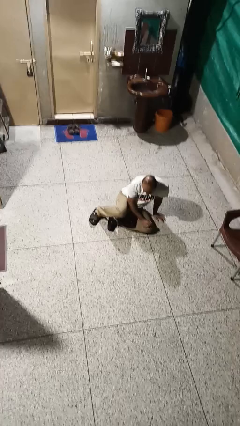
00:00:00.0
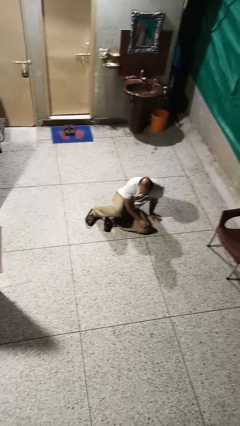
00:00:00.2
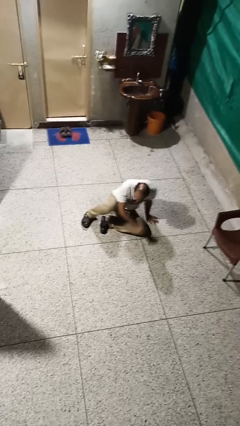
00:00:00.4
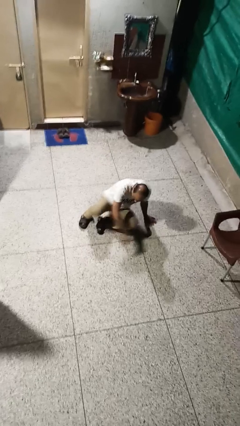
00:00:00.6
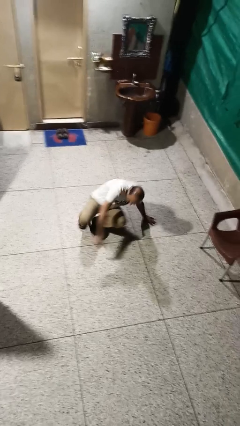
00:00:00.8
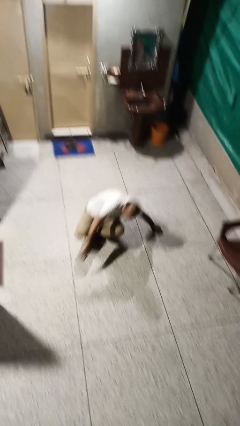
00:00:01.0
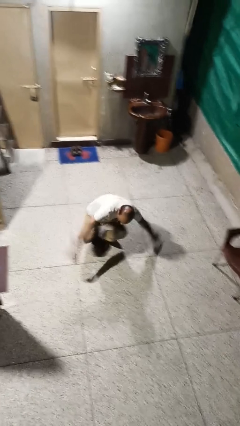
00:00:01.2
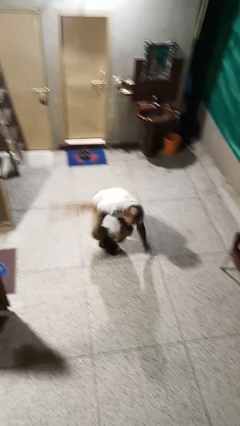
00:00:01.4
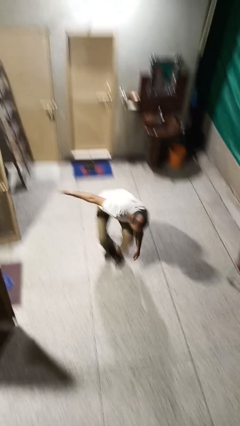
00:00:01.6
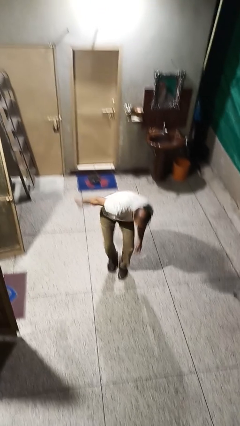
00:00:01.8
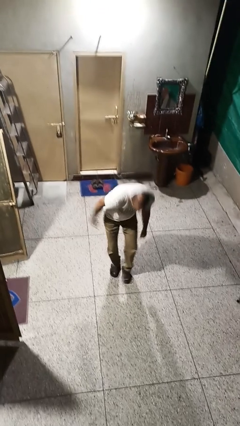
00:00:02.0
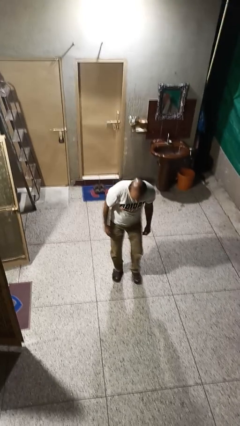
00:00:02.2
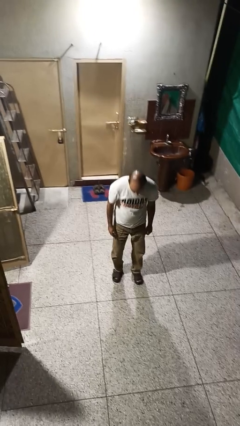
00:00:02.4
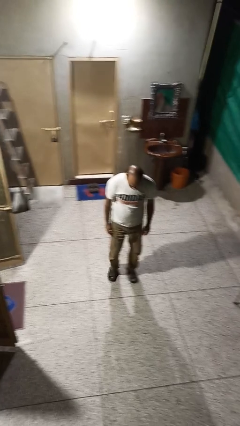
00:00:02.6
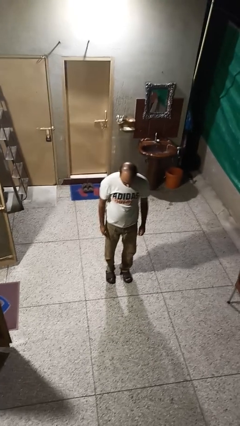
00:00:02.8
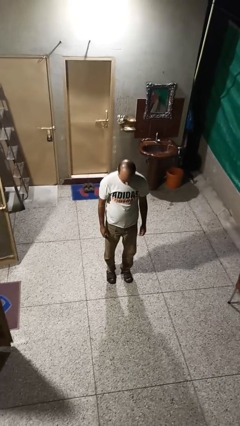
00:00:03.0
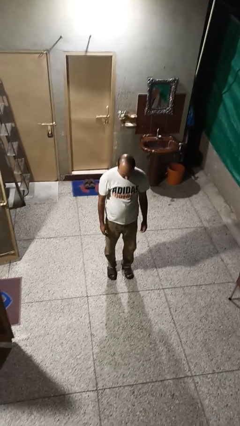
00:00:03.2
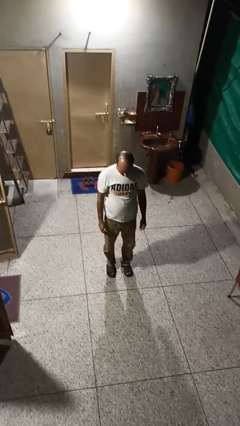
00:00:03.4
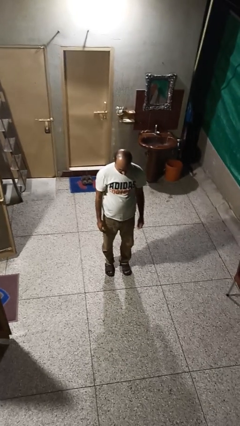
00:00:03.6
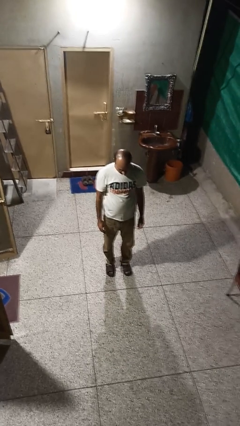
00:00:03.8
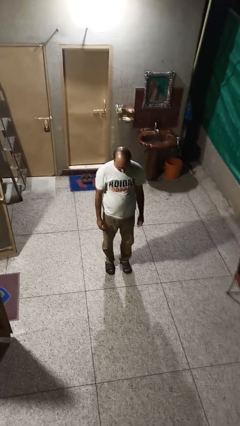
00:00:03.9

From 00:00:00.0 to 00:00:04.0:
person stands up from floor

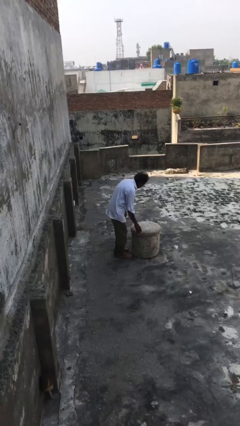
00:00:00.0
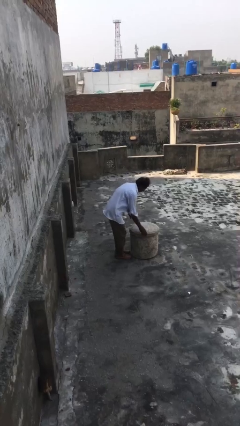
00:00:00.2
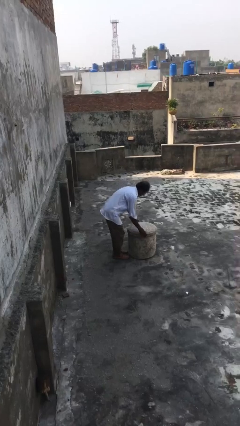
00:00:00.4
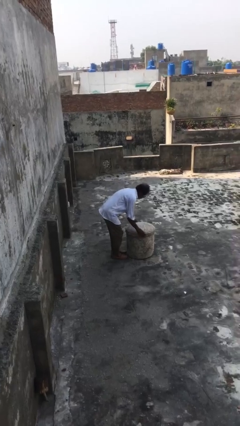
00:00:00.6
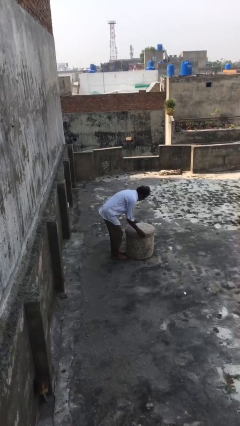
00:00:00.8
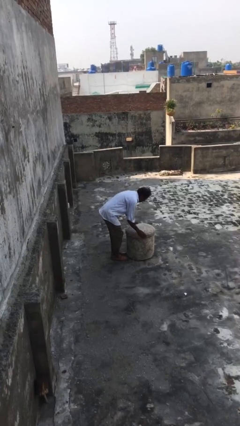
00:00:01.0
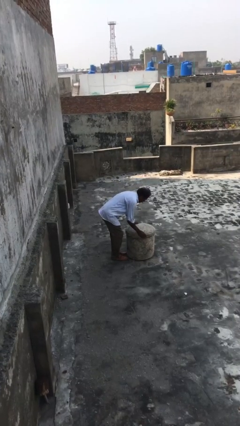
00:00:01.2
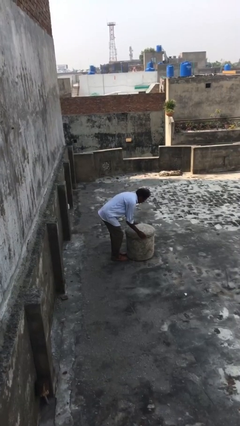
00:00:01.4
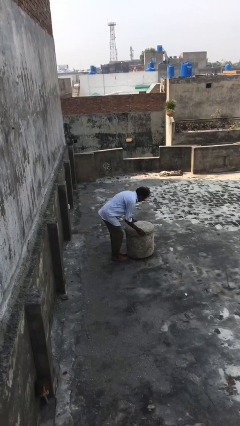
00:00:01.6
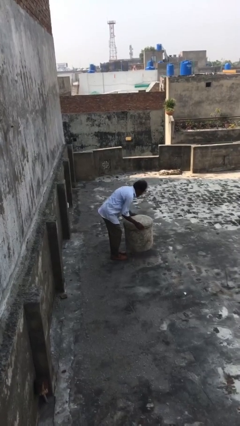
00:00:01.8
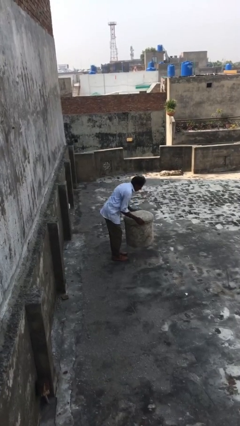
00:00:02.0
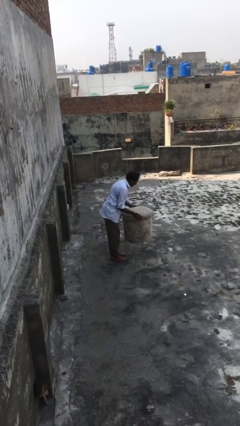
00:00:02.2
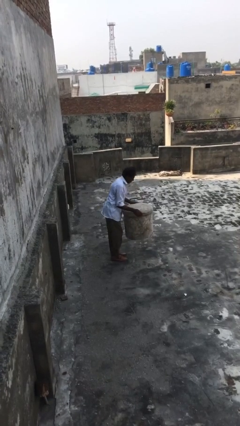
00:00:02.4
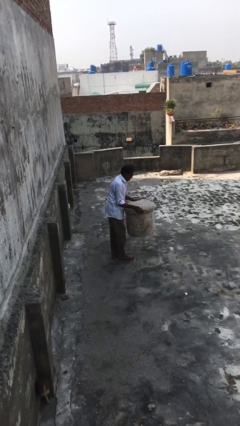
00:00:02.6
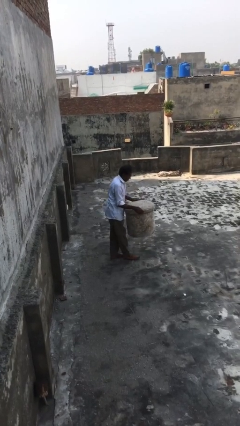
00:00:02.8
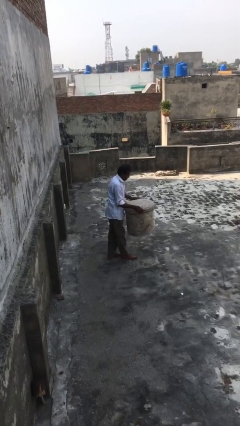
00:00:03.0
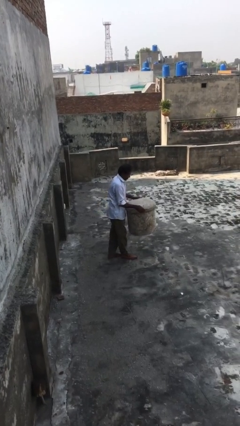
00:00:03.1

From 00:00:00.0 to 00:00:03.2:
person picks up object from floor

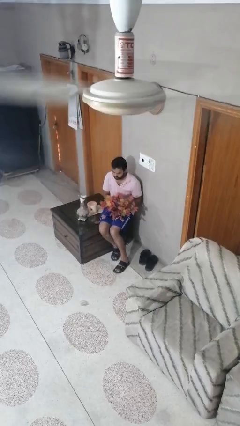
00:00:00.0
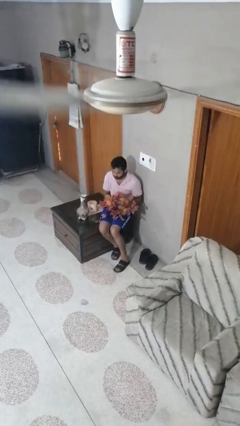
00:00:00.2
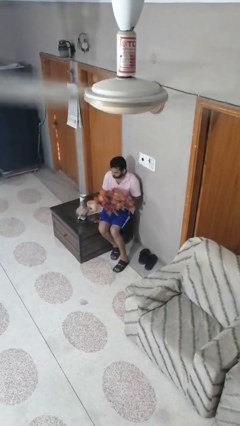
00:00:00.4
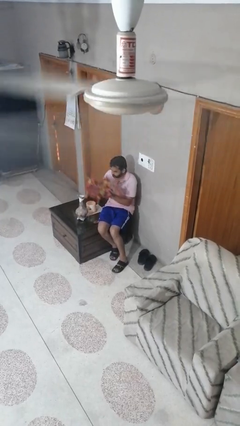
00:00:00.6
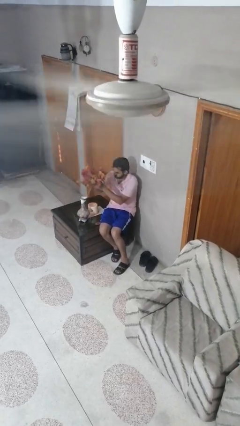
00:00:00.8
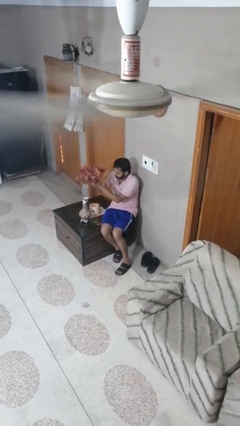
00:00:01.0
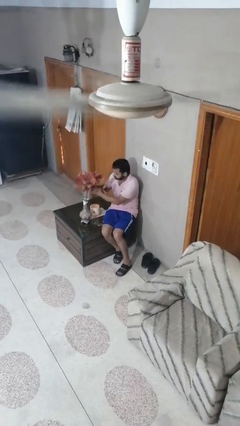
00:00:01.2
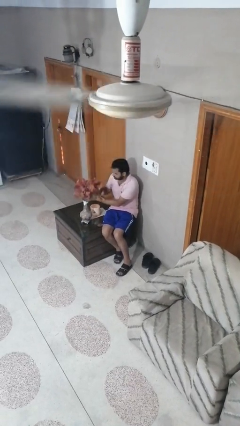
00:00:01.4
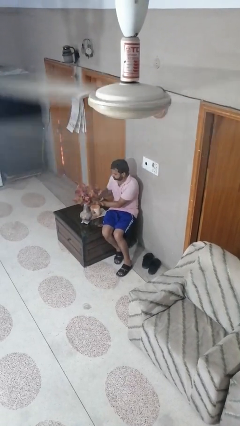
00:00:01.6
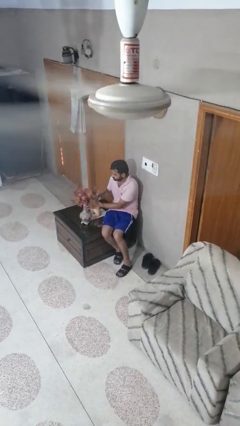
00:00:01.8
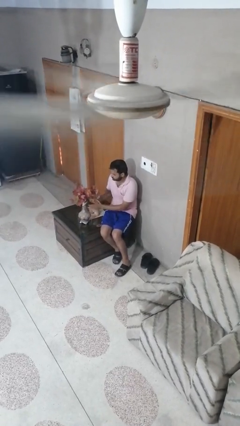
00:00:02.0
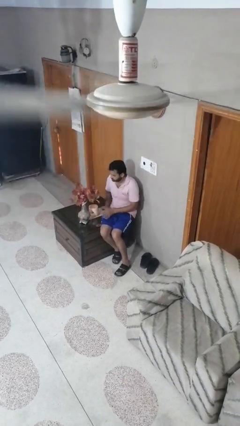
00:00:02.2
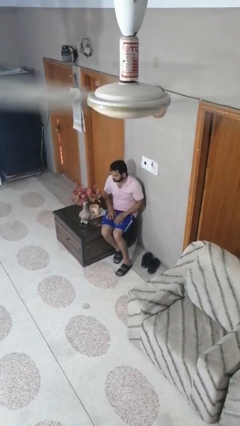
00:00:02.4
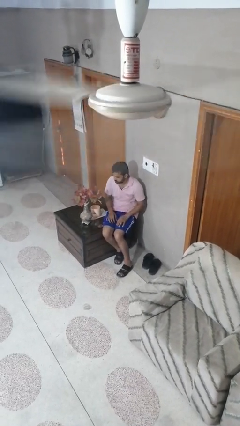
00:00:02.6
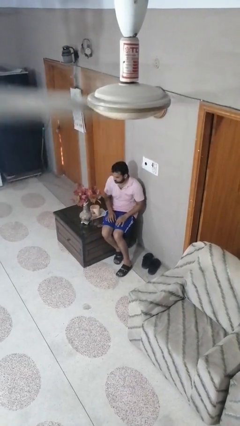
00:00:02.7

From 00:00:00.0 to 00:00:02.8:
person arranges flowers in vase

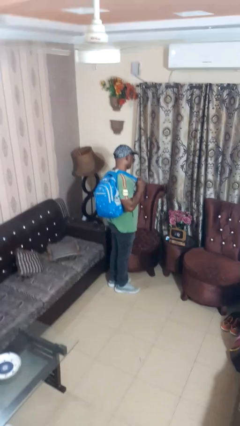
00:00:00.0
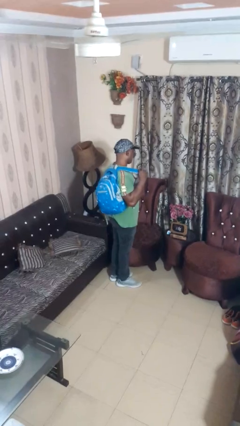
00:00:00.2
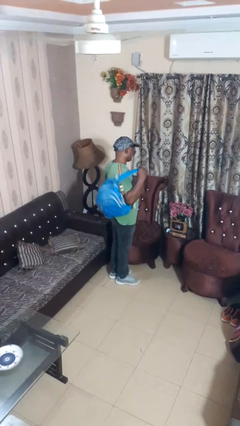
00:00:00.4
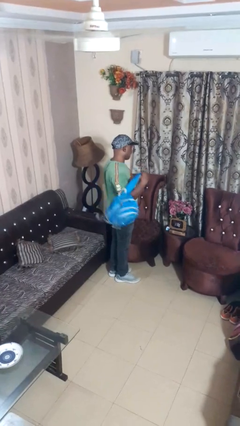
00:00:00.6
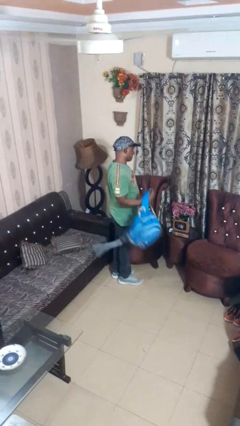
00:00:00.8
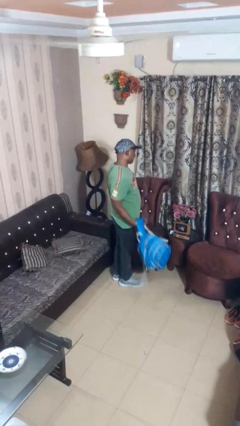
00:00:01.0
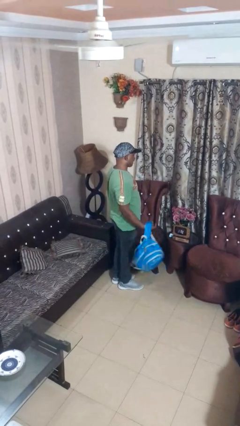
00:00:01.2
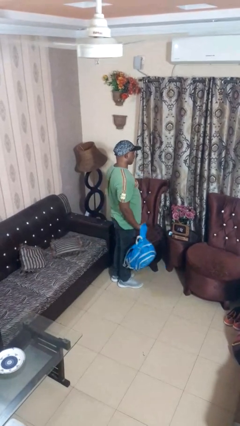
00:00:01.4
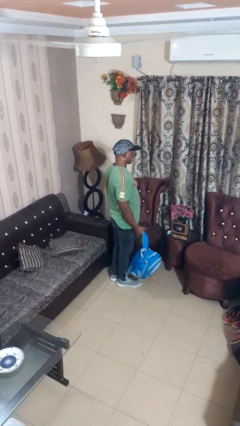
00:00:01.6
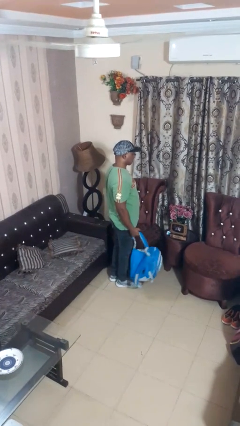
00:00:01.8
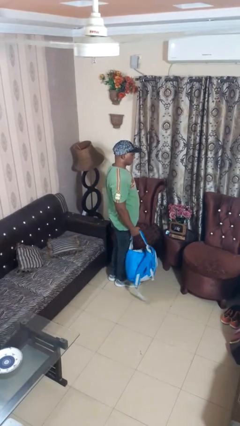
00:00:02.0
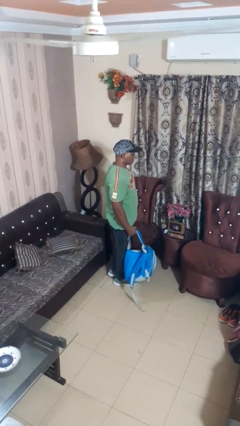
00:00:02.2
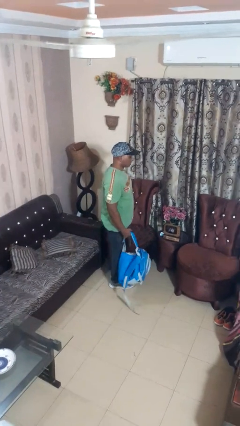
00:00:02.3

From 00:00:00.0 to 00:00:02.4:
person takes off backpack

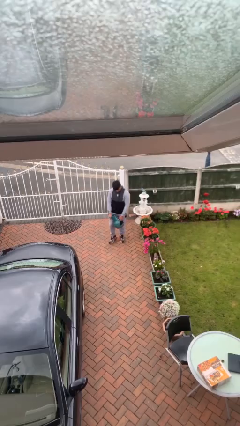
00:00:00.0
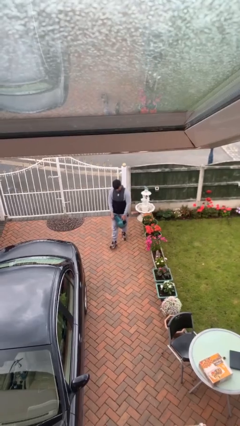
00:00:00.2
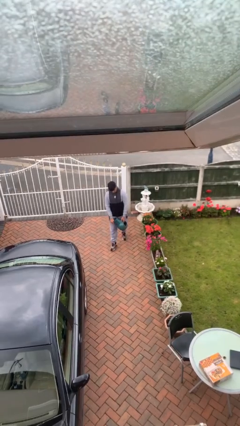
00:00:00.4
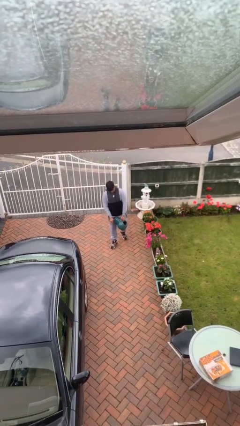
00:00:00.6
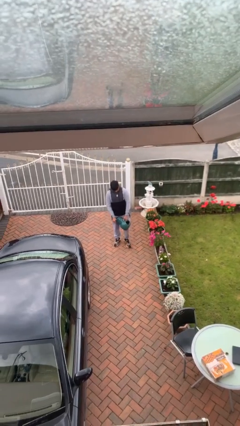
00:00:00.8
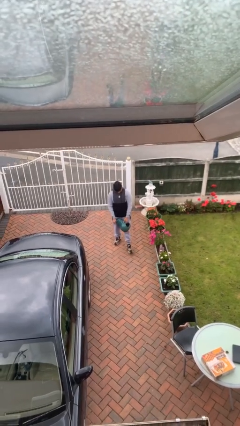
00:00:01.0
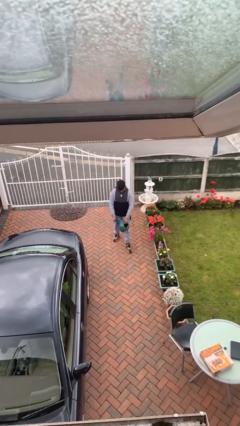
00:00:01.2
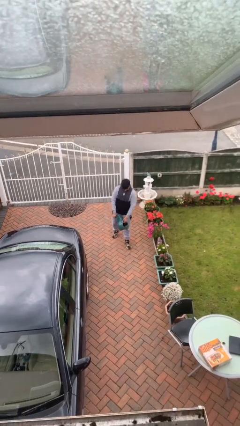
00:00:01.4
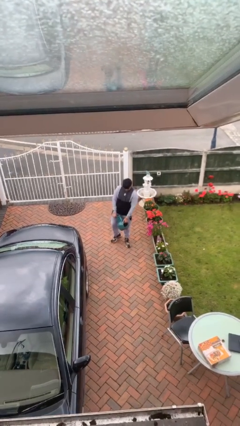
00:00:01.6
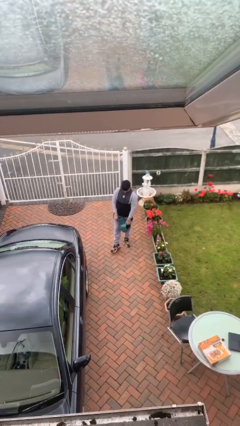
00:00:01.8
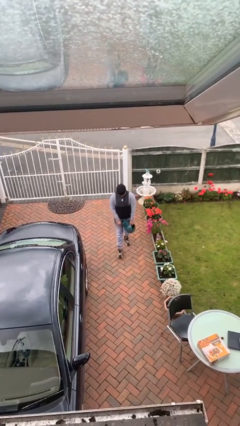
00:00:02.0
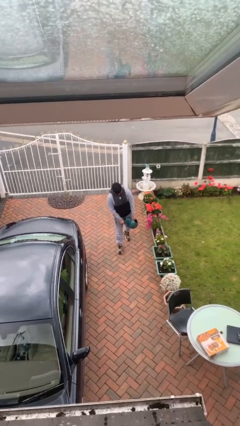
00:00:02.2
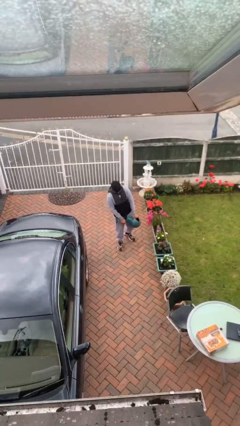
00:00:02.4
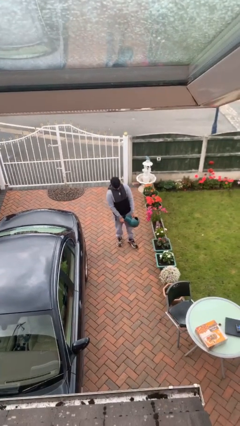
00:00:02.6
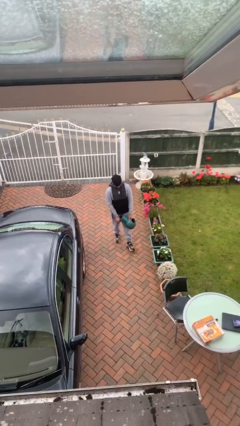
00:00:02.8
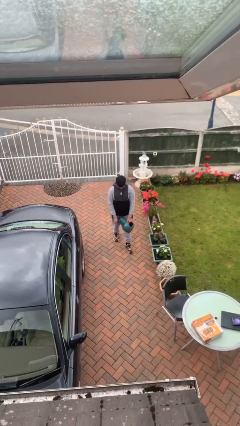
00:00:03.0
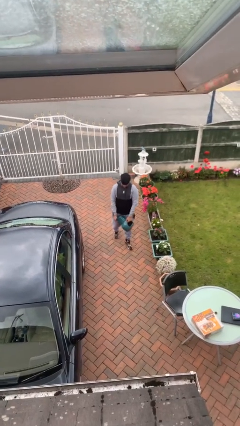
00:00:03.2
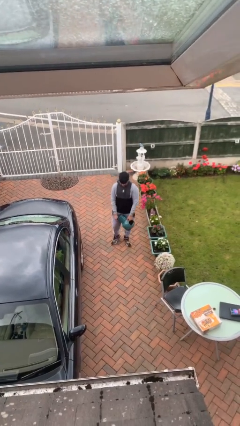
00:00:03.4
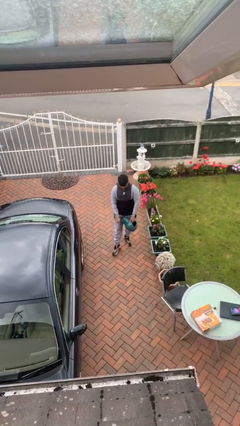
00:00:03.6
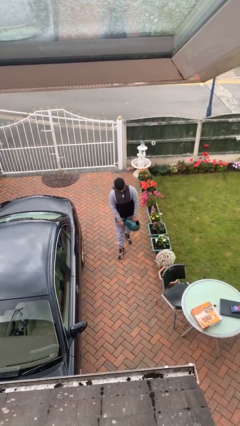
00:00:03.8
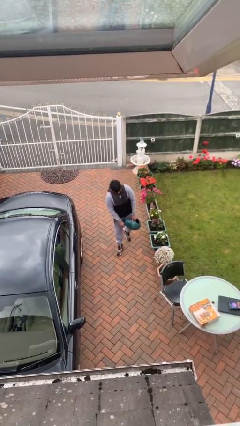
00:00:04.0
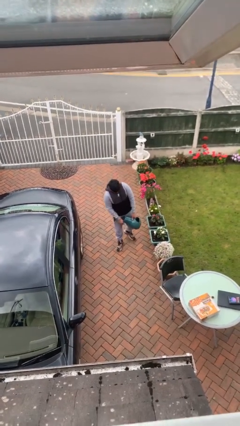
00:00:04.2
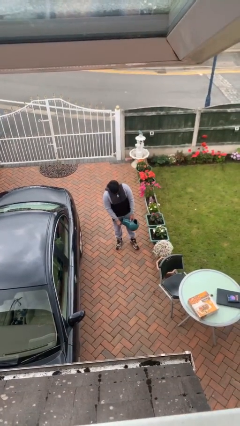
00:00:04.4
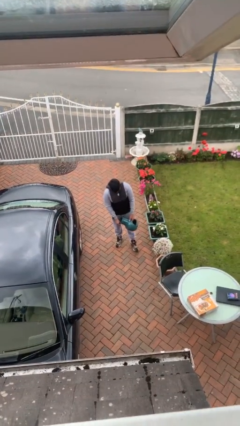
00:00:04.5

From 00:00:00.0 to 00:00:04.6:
person carries heavy object

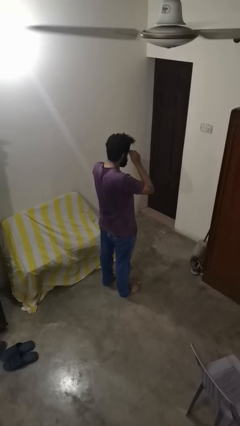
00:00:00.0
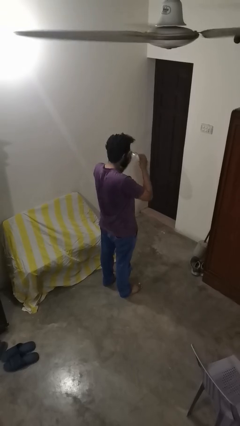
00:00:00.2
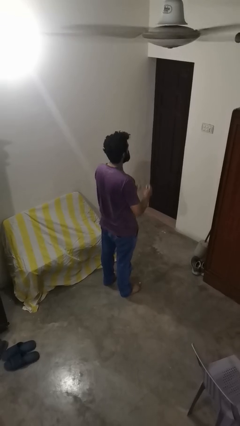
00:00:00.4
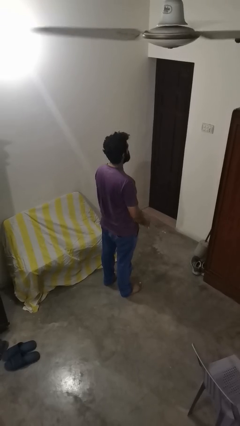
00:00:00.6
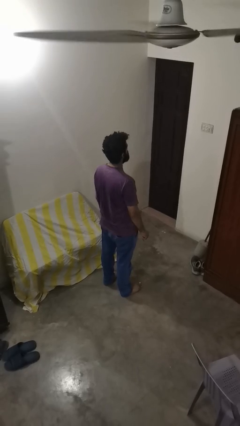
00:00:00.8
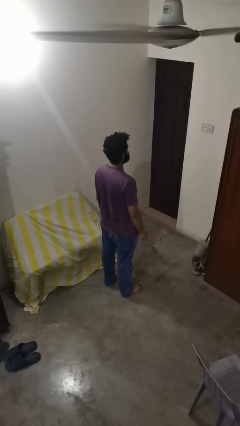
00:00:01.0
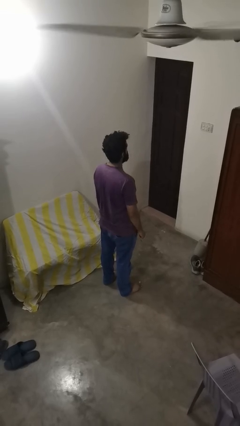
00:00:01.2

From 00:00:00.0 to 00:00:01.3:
person takes off glasses
